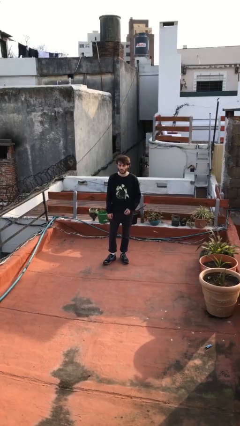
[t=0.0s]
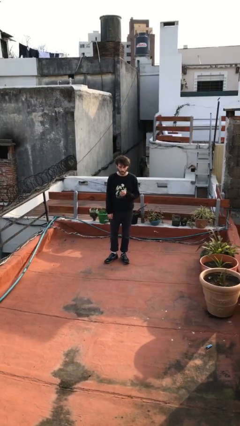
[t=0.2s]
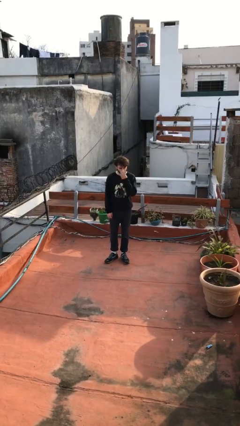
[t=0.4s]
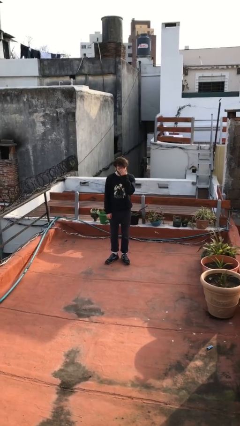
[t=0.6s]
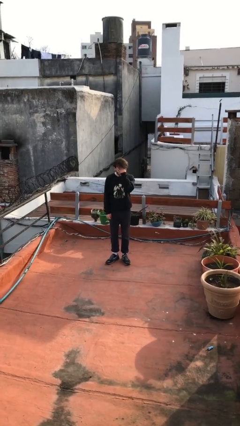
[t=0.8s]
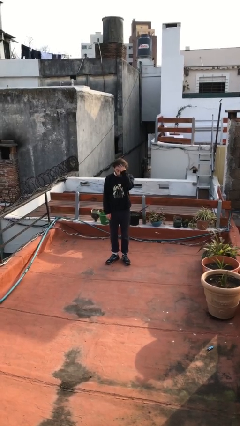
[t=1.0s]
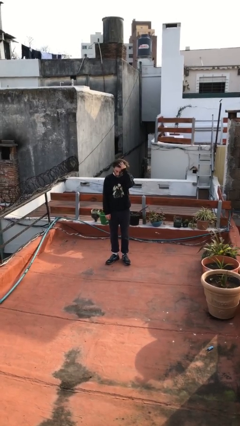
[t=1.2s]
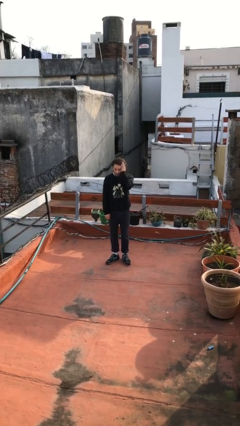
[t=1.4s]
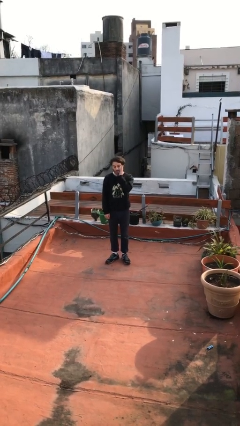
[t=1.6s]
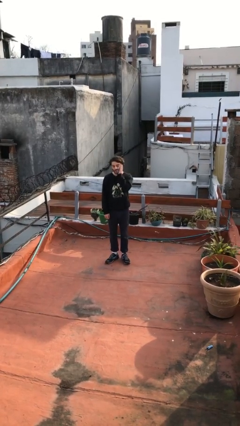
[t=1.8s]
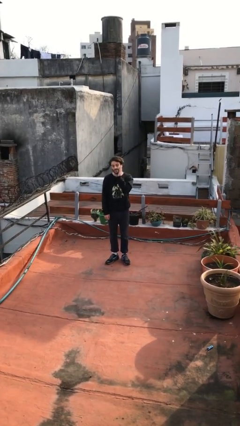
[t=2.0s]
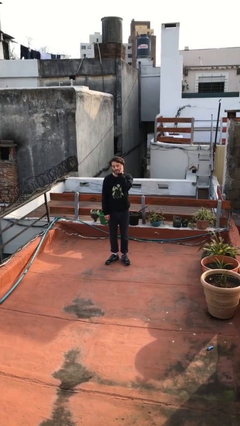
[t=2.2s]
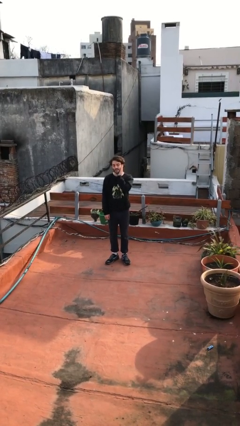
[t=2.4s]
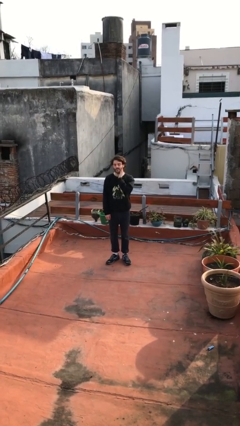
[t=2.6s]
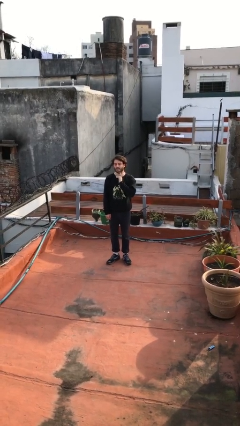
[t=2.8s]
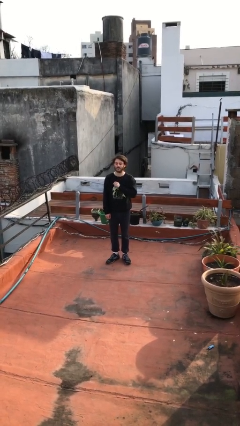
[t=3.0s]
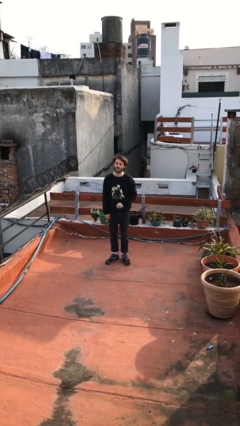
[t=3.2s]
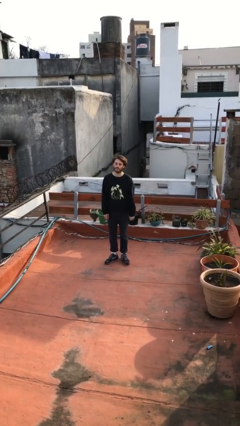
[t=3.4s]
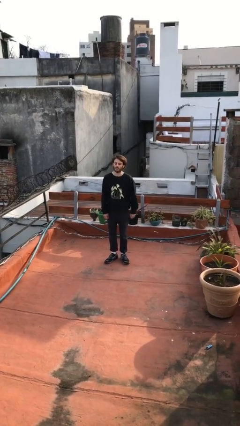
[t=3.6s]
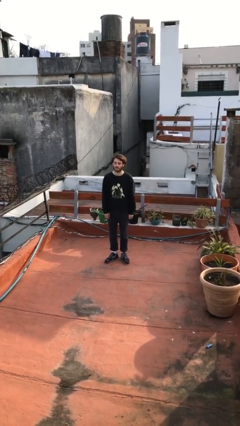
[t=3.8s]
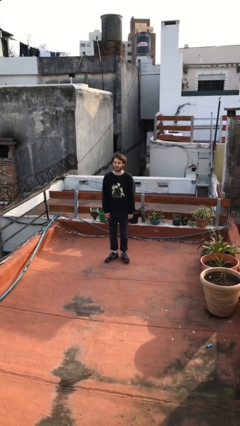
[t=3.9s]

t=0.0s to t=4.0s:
person scratches face

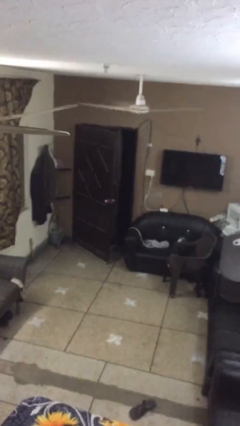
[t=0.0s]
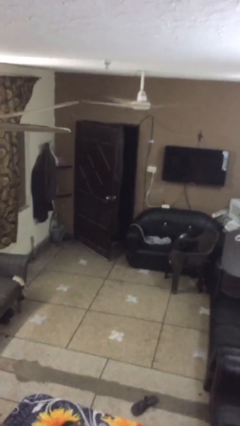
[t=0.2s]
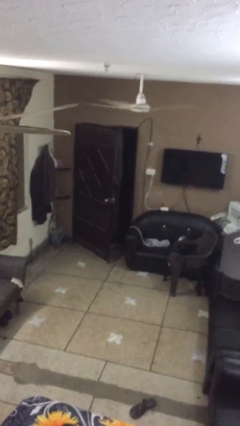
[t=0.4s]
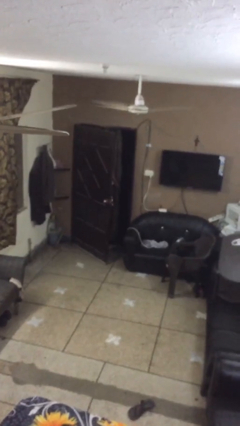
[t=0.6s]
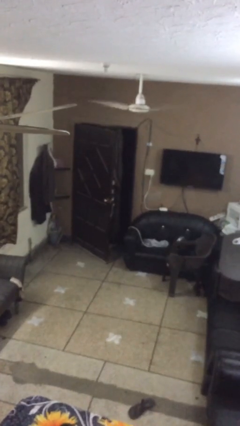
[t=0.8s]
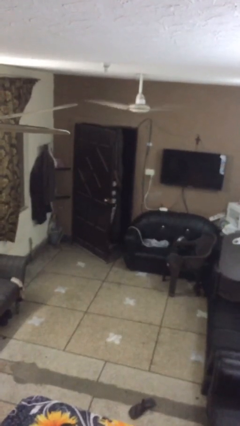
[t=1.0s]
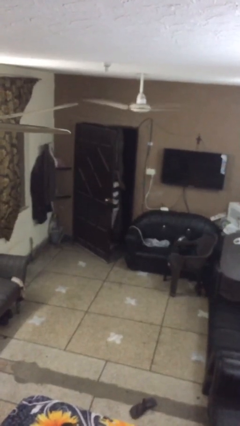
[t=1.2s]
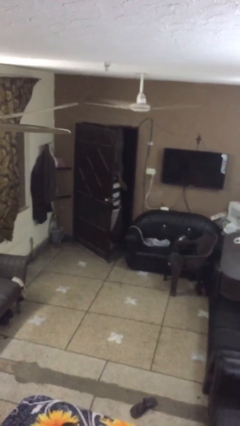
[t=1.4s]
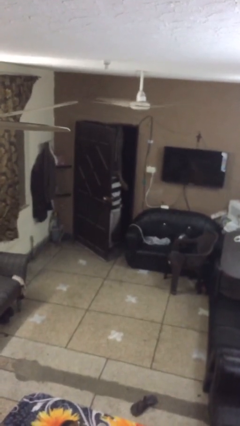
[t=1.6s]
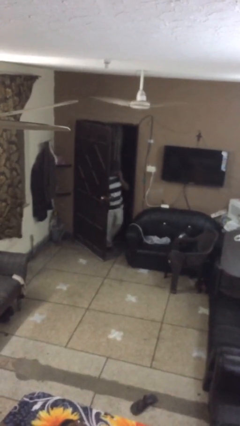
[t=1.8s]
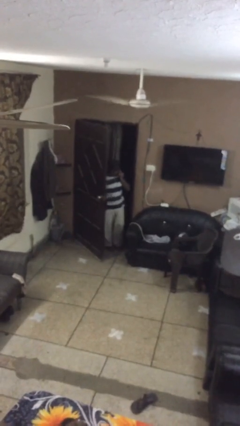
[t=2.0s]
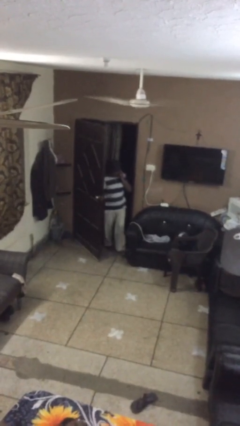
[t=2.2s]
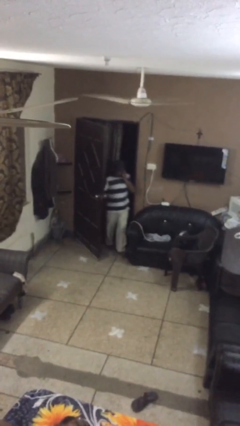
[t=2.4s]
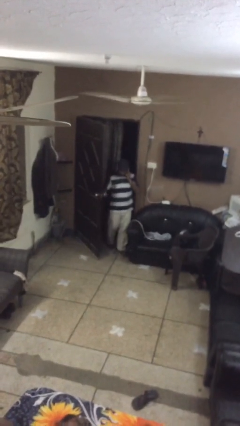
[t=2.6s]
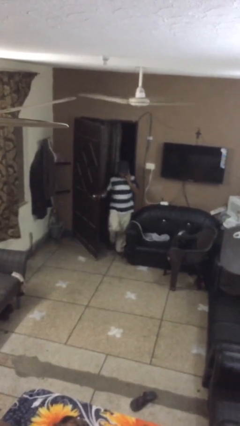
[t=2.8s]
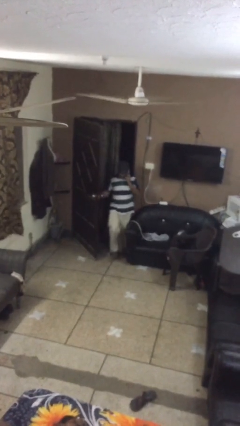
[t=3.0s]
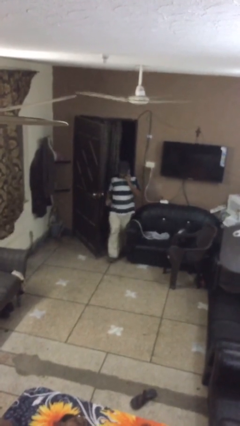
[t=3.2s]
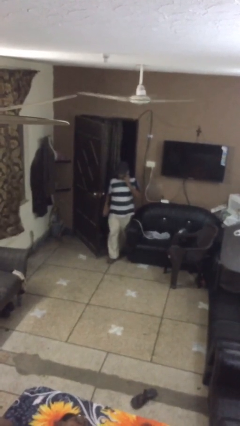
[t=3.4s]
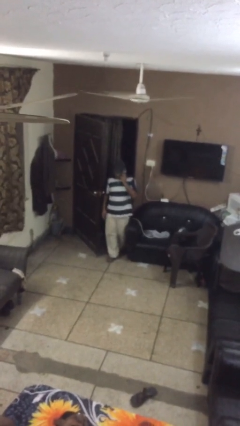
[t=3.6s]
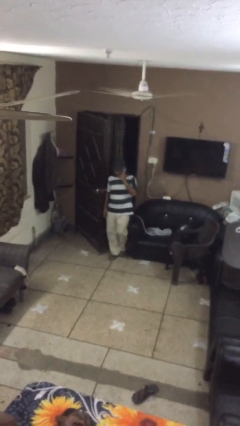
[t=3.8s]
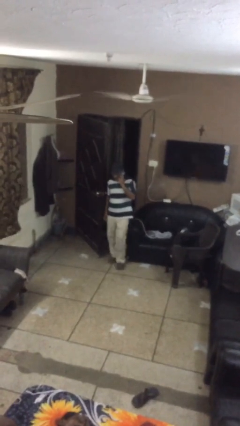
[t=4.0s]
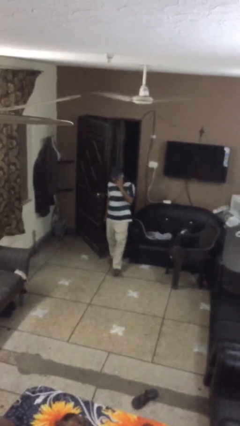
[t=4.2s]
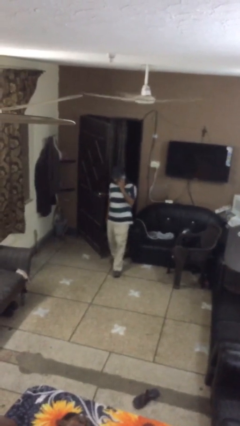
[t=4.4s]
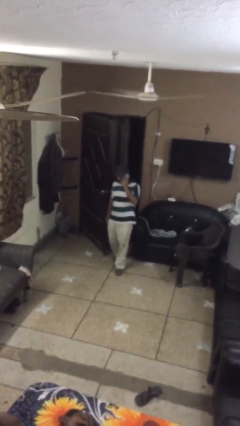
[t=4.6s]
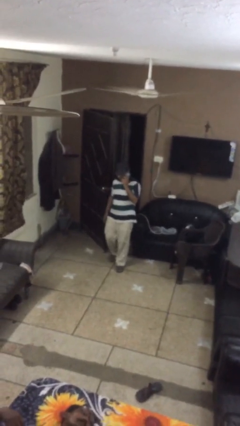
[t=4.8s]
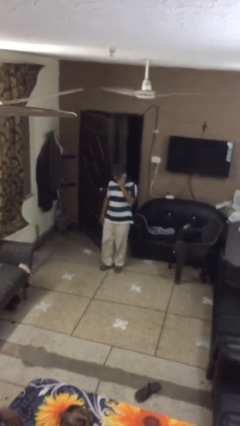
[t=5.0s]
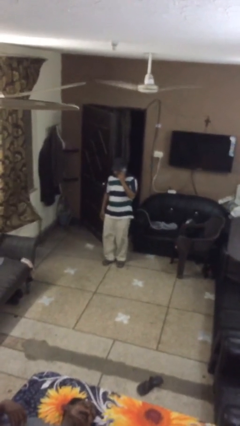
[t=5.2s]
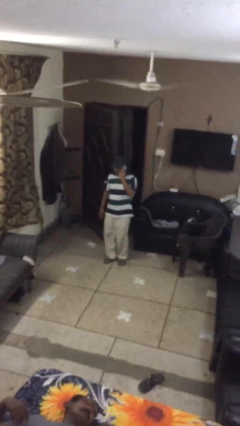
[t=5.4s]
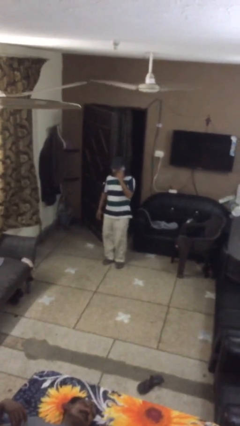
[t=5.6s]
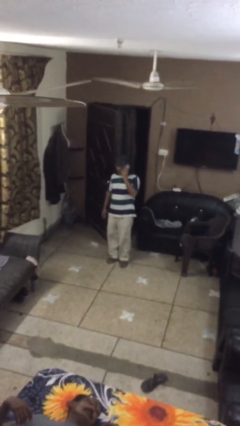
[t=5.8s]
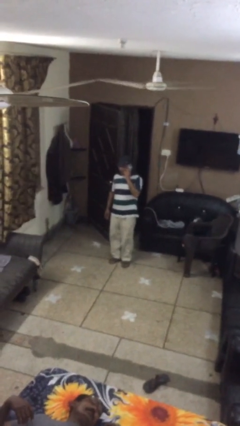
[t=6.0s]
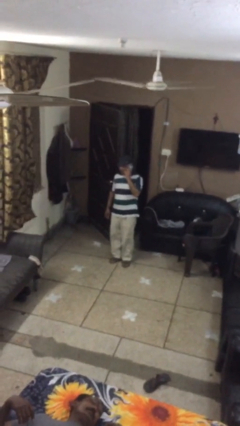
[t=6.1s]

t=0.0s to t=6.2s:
person enters scene through structure

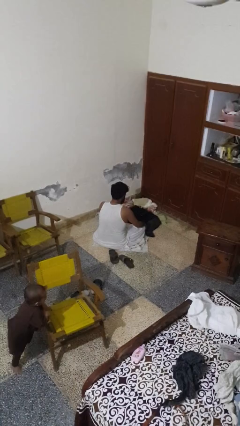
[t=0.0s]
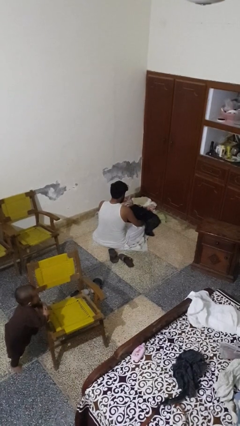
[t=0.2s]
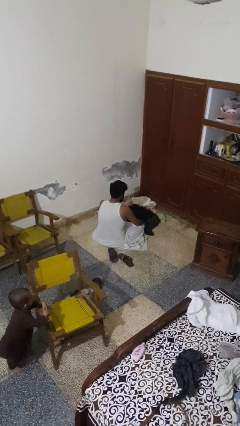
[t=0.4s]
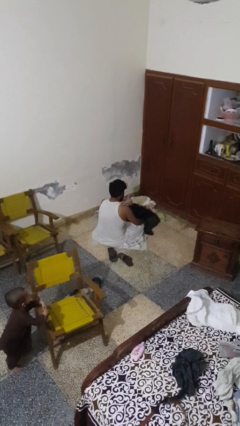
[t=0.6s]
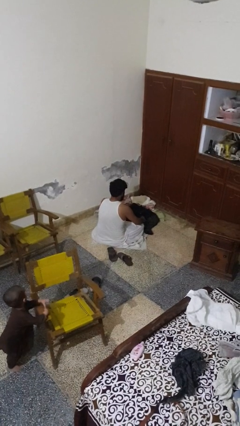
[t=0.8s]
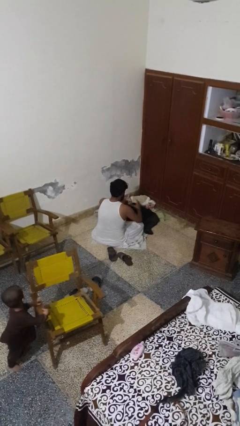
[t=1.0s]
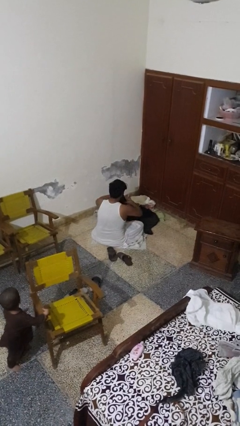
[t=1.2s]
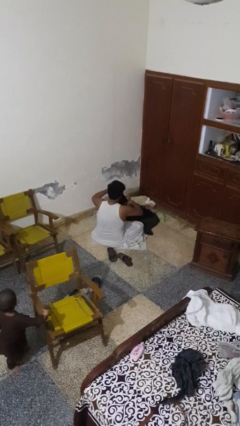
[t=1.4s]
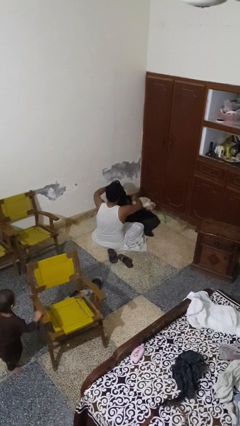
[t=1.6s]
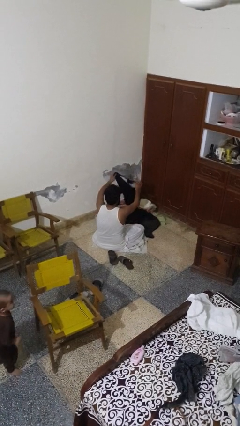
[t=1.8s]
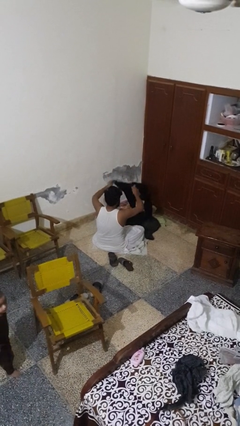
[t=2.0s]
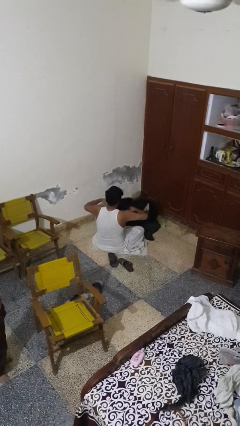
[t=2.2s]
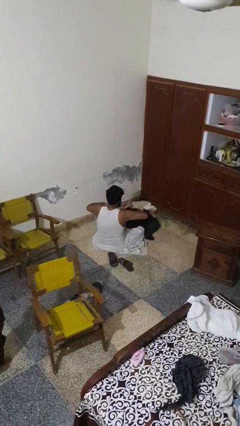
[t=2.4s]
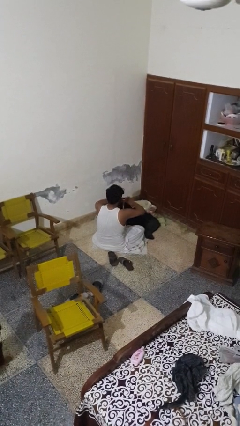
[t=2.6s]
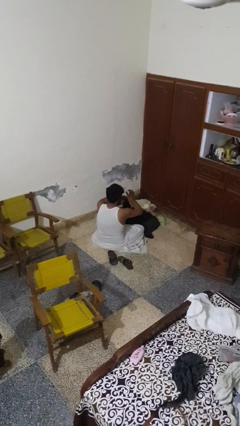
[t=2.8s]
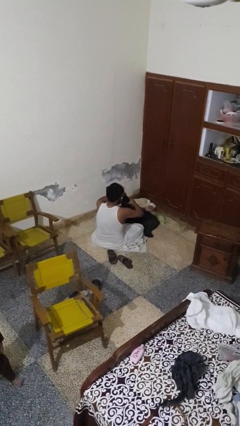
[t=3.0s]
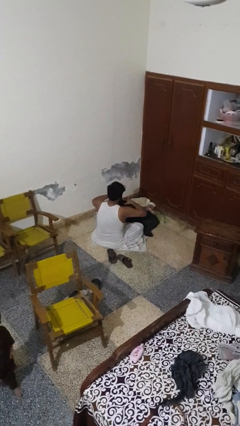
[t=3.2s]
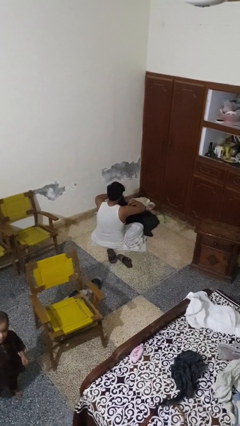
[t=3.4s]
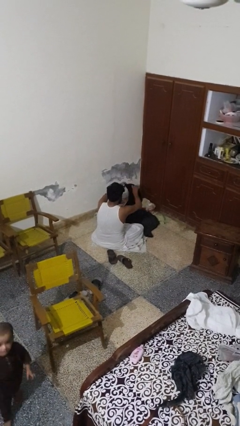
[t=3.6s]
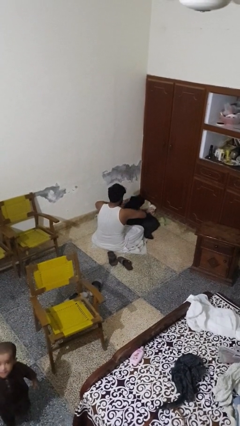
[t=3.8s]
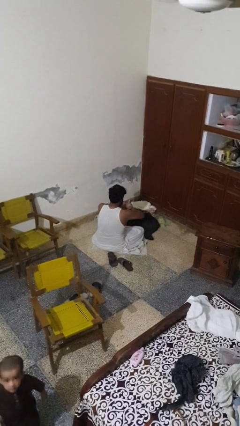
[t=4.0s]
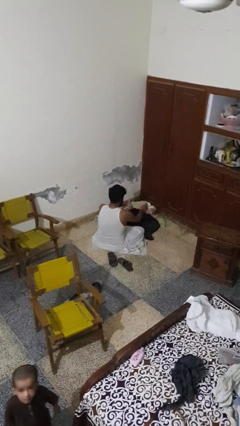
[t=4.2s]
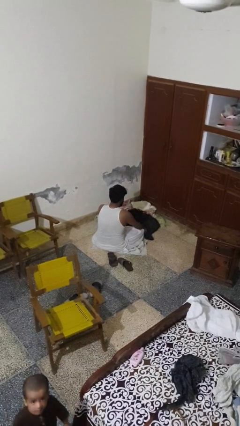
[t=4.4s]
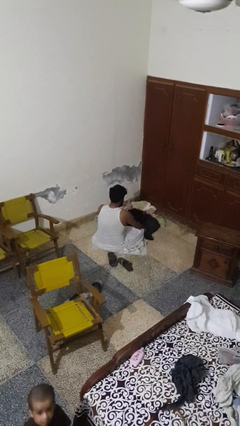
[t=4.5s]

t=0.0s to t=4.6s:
person folds pants

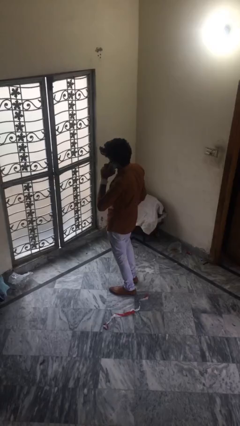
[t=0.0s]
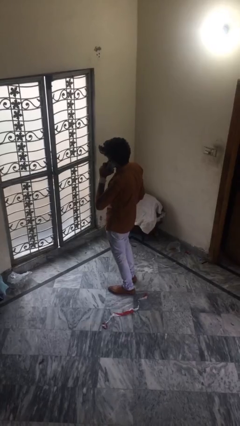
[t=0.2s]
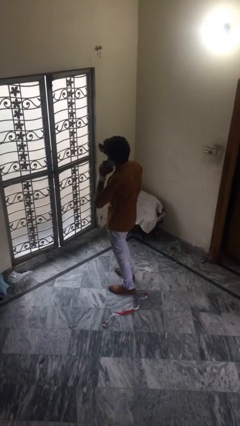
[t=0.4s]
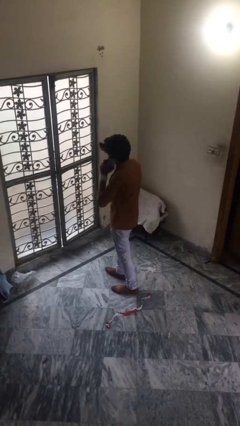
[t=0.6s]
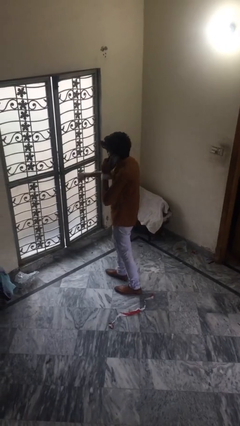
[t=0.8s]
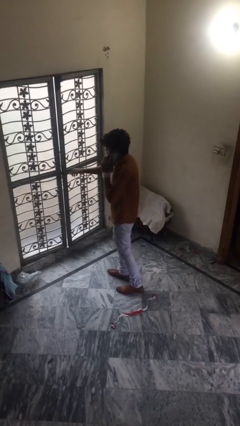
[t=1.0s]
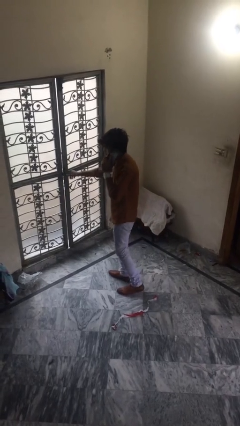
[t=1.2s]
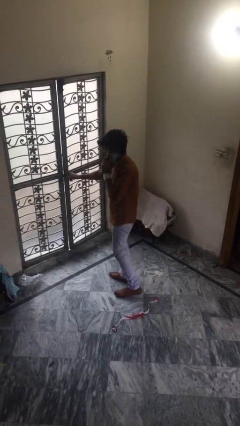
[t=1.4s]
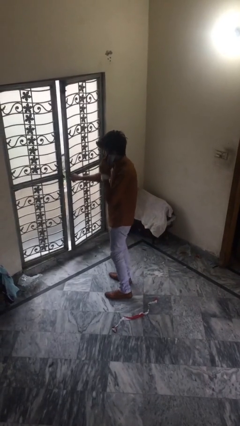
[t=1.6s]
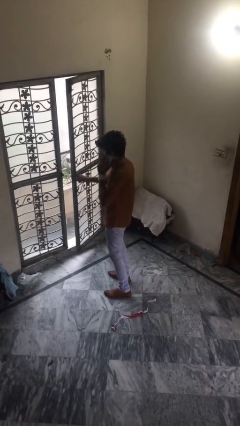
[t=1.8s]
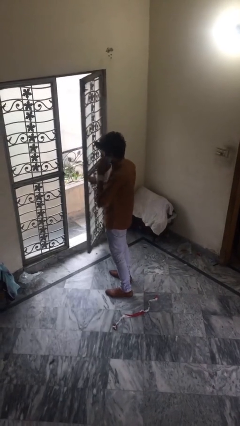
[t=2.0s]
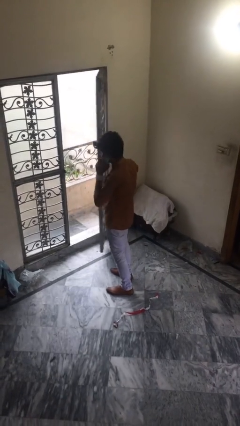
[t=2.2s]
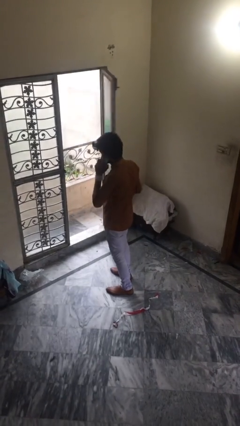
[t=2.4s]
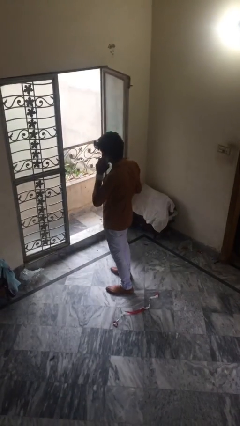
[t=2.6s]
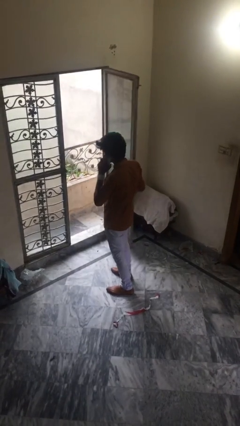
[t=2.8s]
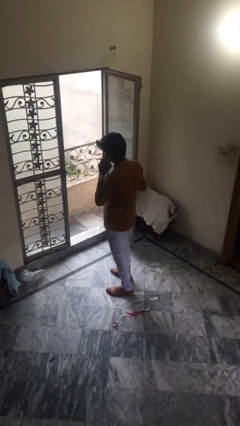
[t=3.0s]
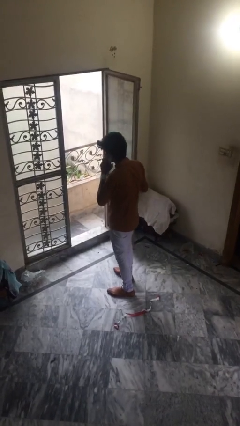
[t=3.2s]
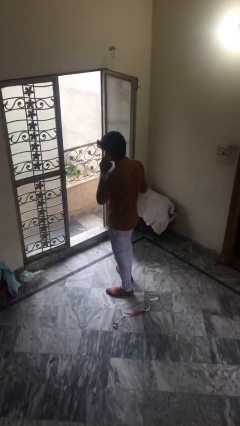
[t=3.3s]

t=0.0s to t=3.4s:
person opens facility door
